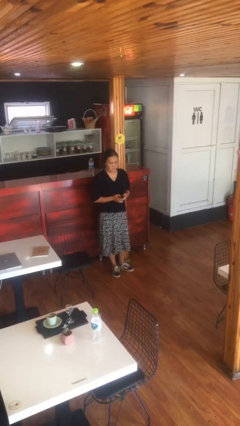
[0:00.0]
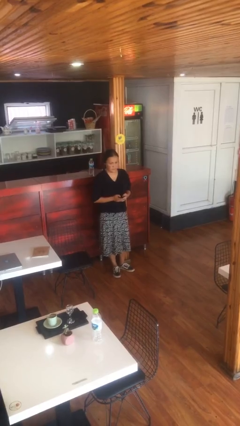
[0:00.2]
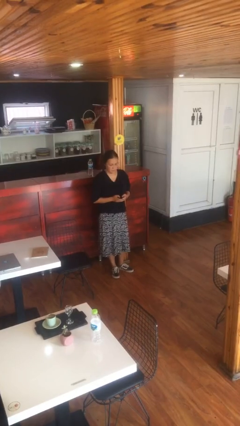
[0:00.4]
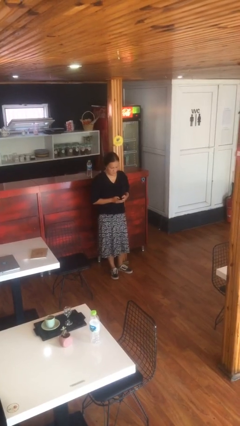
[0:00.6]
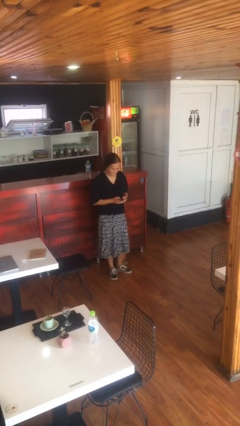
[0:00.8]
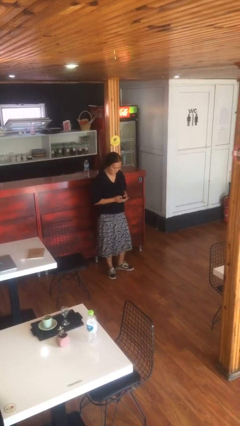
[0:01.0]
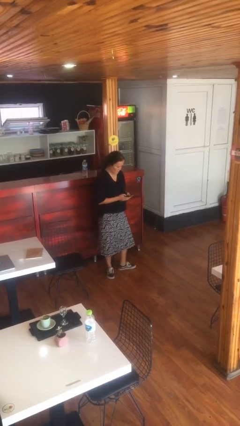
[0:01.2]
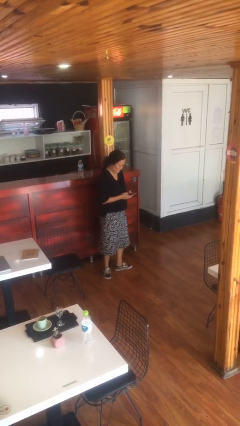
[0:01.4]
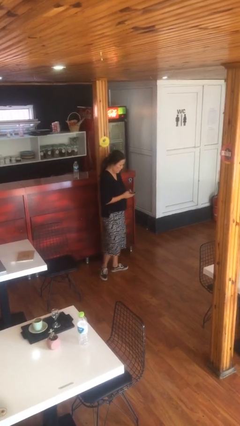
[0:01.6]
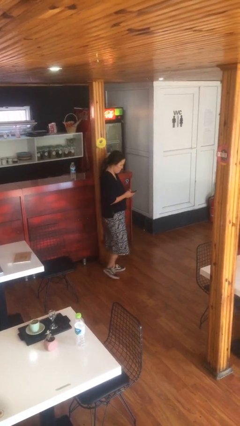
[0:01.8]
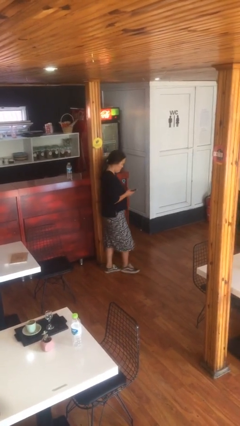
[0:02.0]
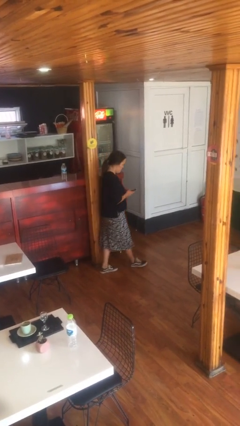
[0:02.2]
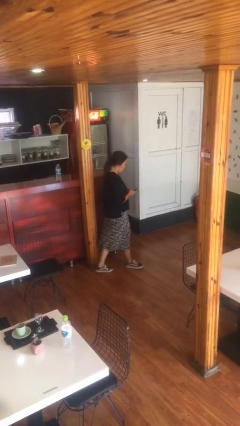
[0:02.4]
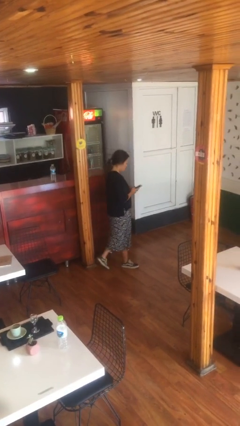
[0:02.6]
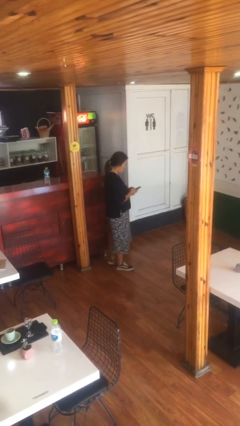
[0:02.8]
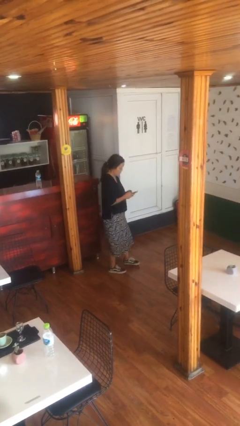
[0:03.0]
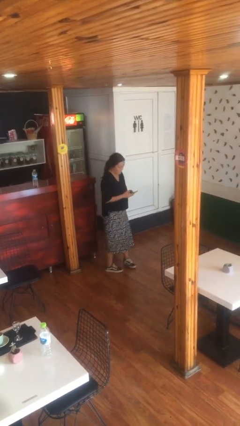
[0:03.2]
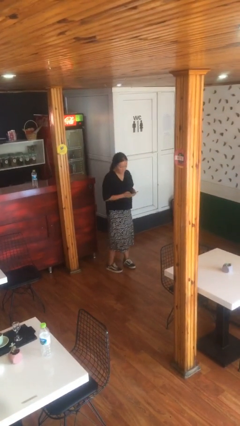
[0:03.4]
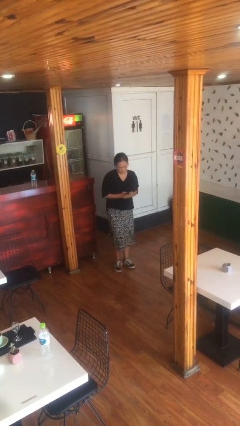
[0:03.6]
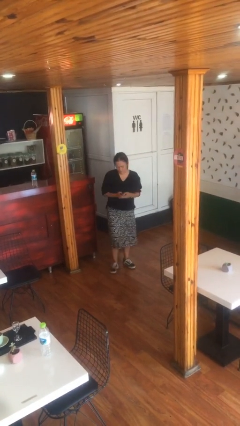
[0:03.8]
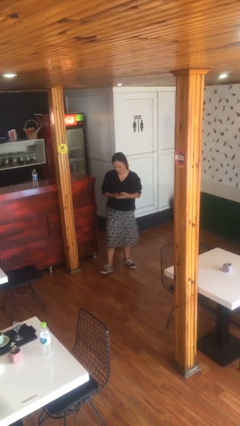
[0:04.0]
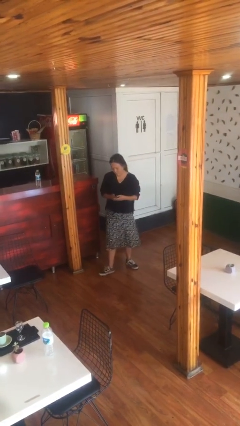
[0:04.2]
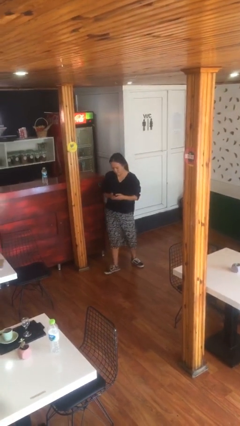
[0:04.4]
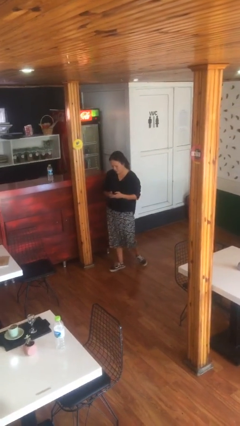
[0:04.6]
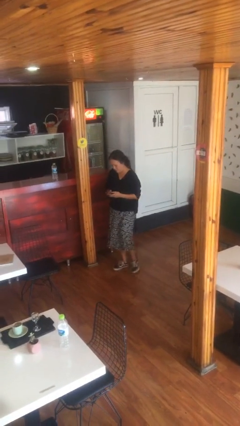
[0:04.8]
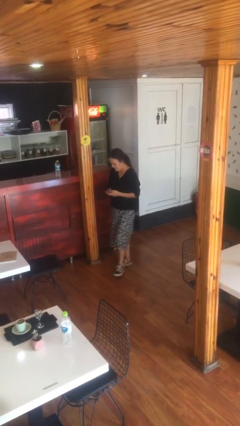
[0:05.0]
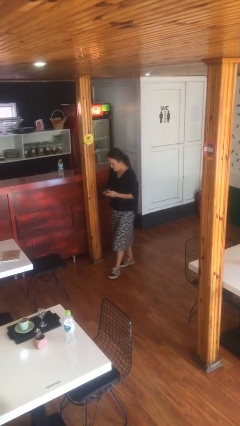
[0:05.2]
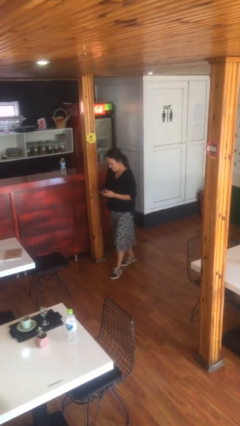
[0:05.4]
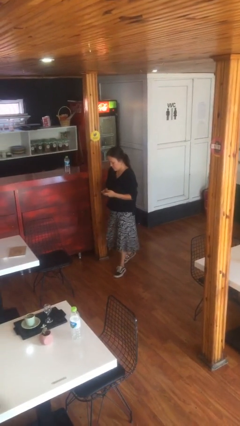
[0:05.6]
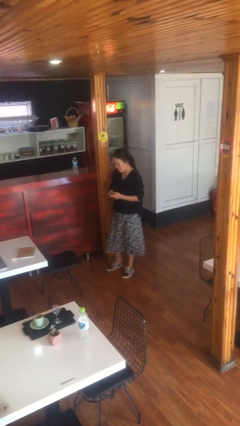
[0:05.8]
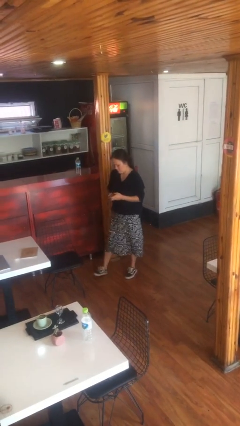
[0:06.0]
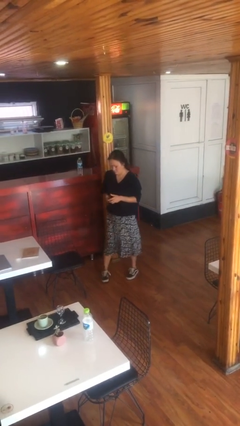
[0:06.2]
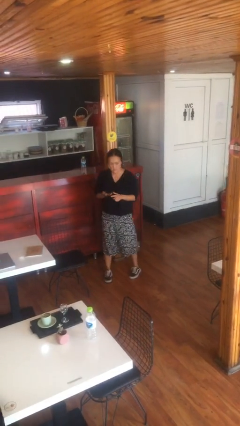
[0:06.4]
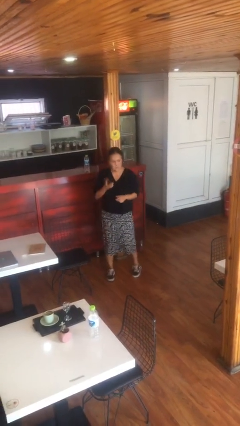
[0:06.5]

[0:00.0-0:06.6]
person texts on phone

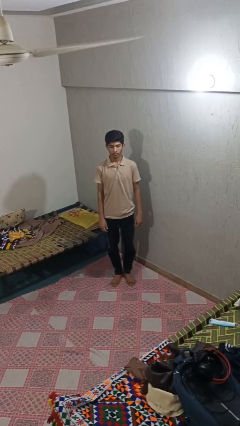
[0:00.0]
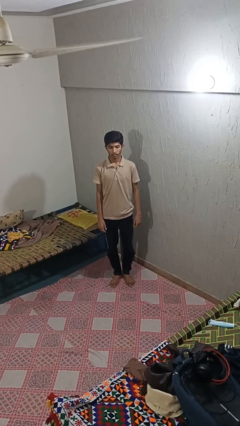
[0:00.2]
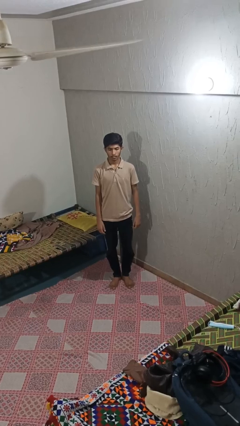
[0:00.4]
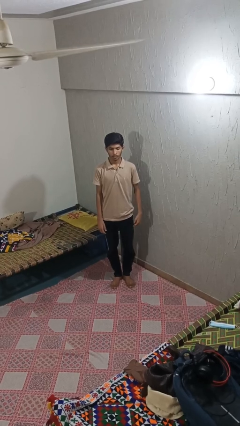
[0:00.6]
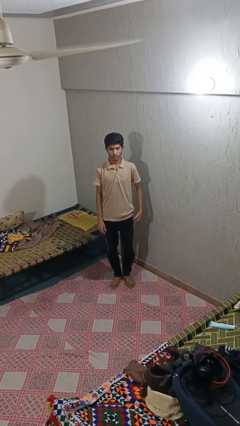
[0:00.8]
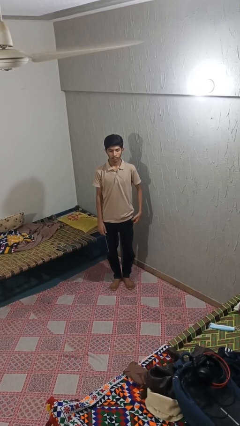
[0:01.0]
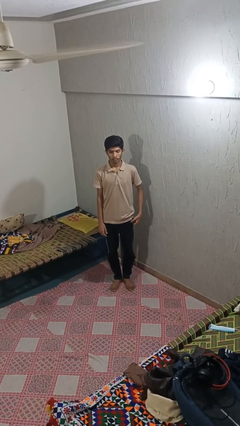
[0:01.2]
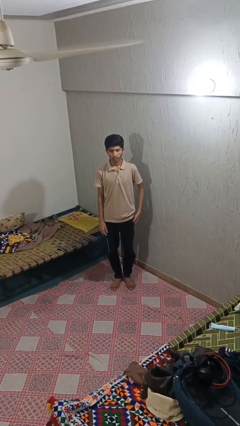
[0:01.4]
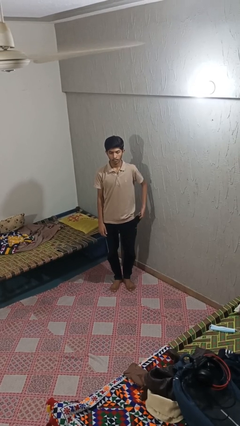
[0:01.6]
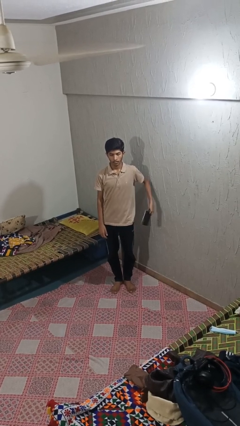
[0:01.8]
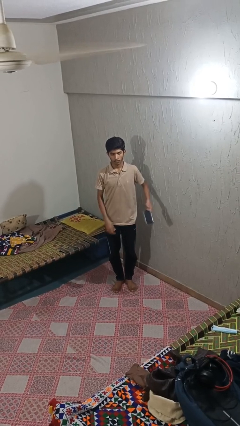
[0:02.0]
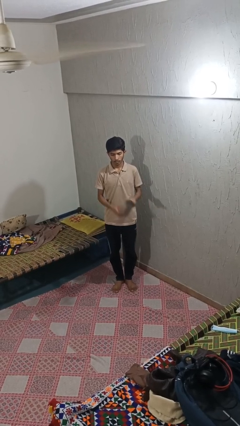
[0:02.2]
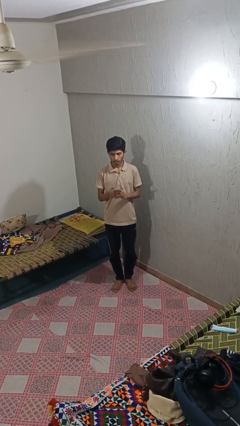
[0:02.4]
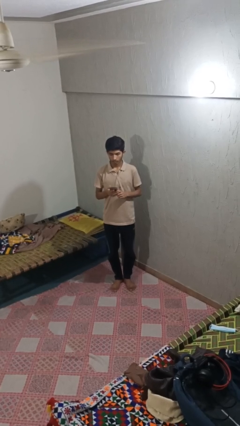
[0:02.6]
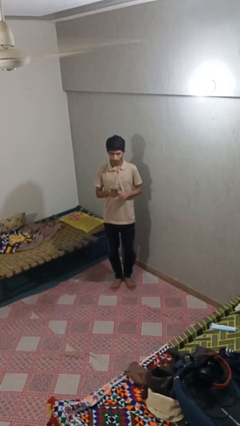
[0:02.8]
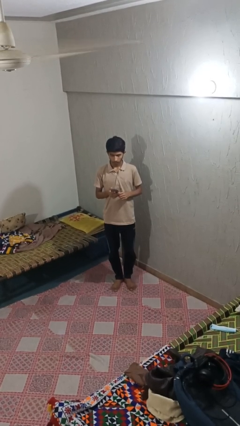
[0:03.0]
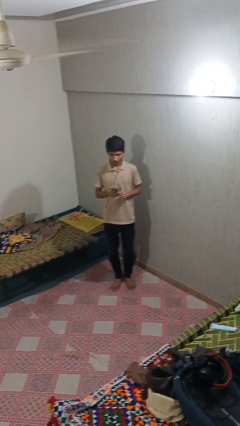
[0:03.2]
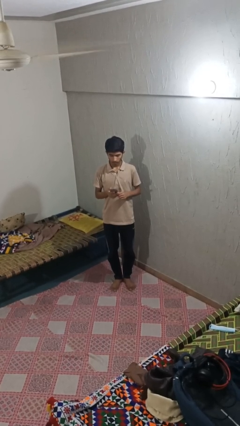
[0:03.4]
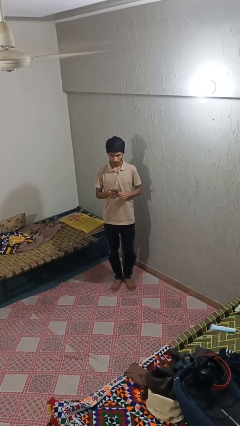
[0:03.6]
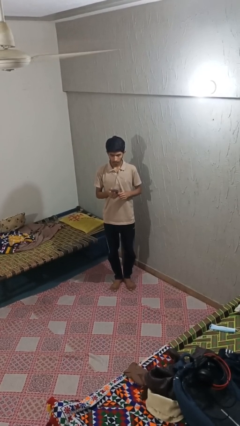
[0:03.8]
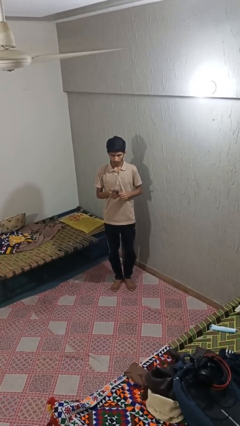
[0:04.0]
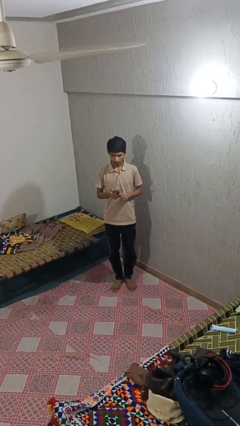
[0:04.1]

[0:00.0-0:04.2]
person takes phone from pocket

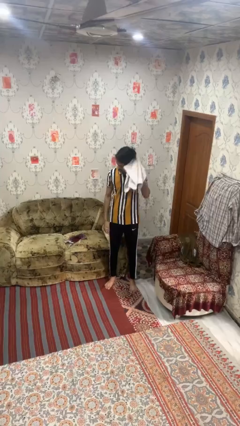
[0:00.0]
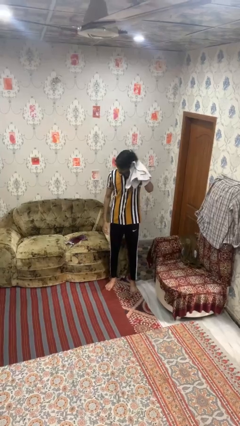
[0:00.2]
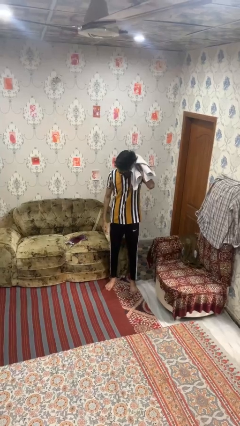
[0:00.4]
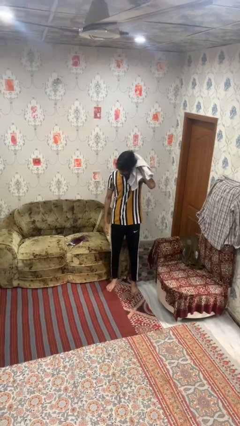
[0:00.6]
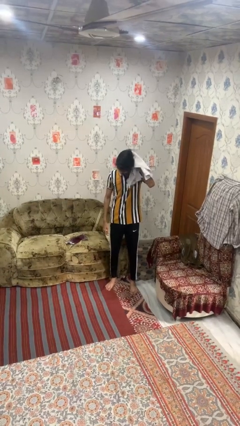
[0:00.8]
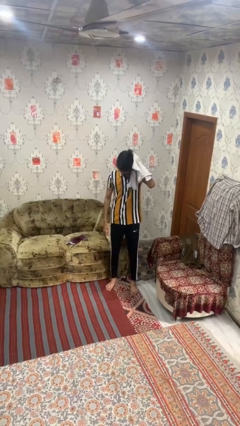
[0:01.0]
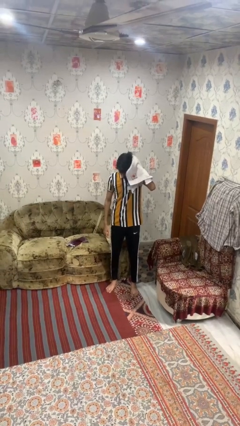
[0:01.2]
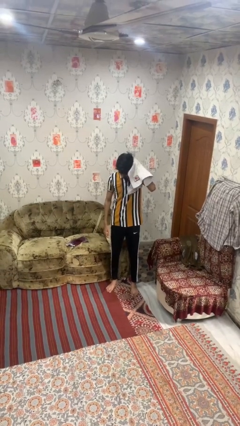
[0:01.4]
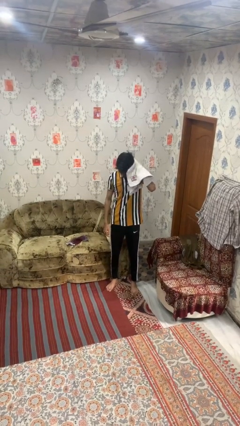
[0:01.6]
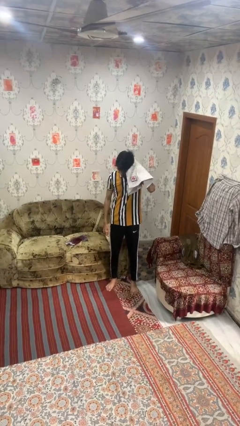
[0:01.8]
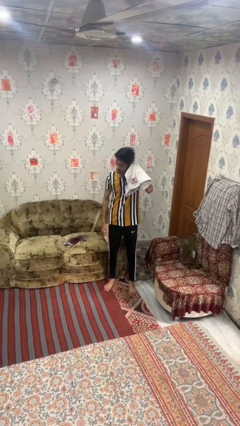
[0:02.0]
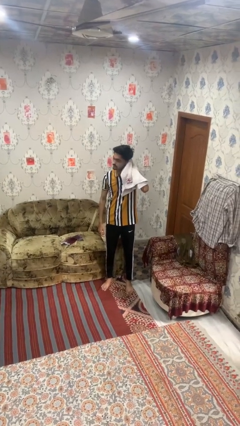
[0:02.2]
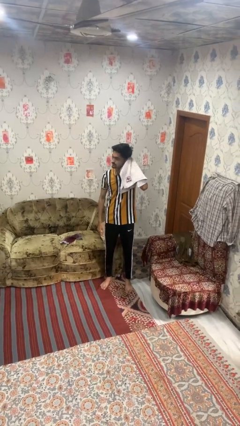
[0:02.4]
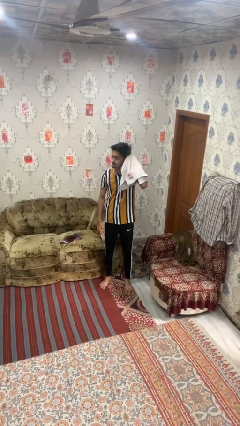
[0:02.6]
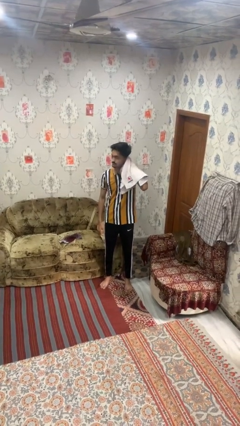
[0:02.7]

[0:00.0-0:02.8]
person dries hair with towel

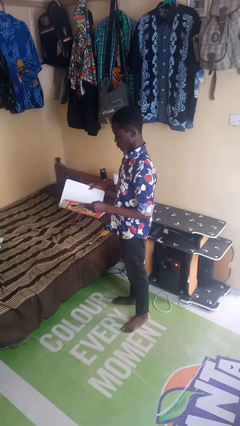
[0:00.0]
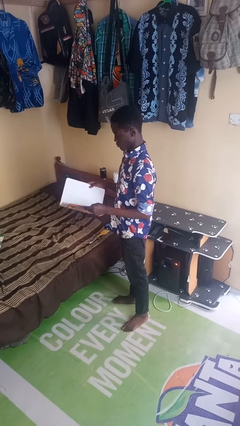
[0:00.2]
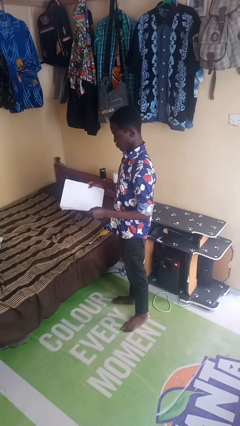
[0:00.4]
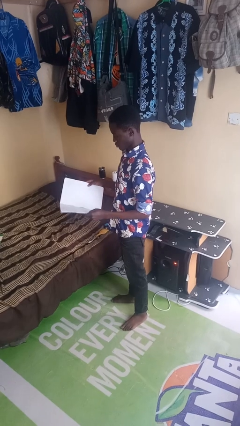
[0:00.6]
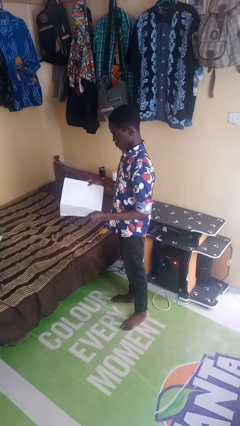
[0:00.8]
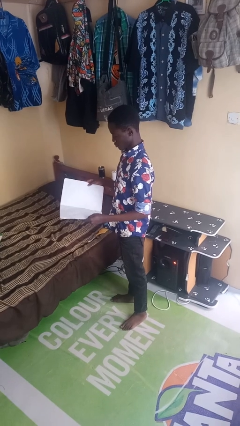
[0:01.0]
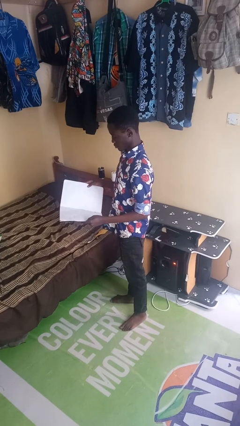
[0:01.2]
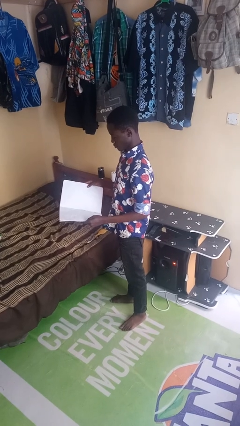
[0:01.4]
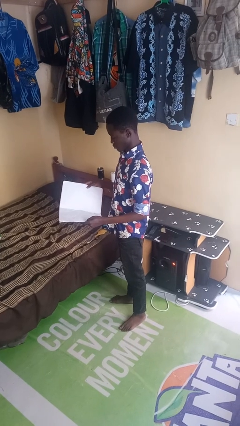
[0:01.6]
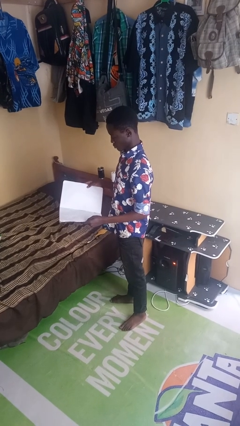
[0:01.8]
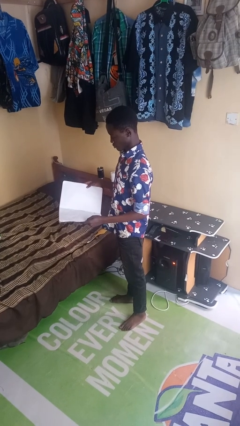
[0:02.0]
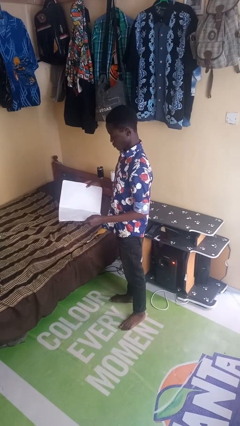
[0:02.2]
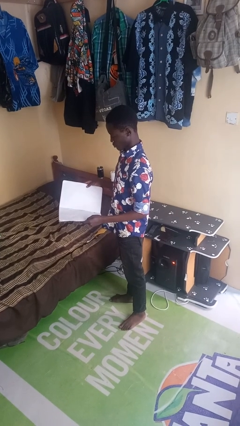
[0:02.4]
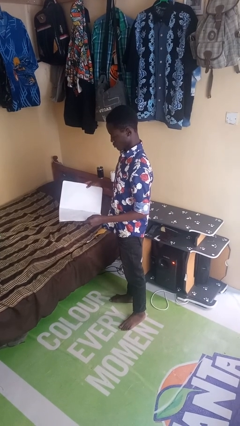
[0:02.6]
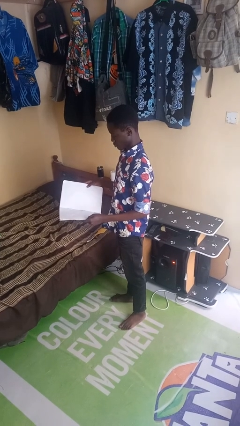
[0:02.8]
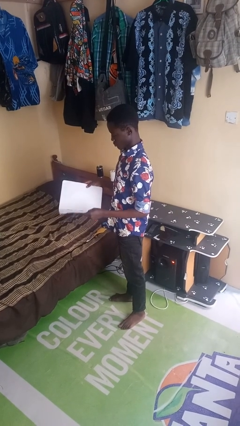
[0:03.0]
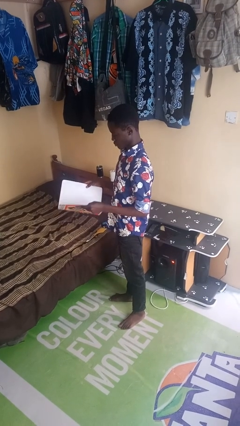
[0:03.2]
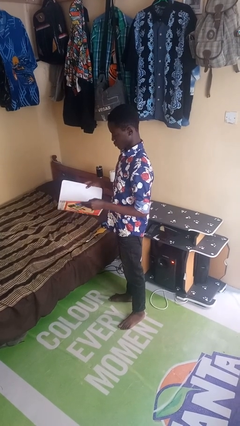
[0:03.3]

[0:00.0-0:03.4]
person reads newspaper

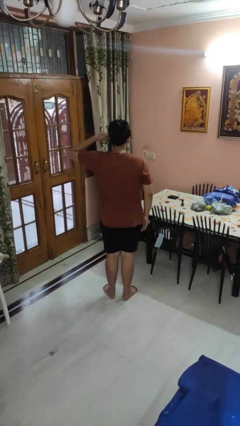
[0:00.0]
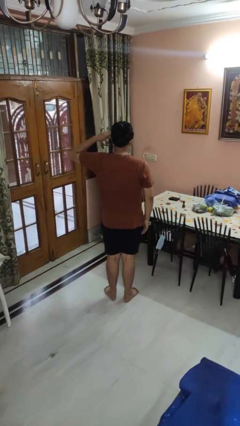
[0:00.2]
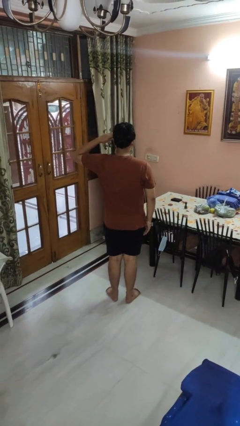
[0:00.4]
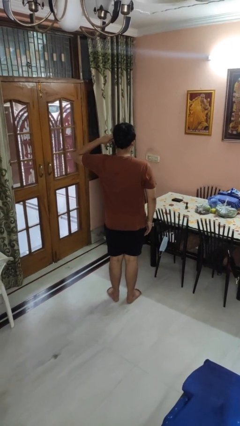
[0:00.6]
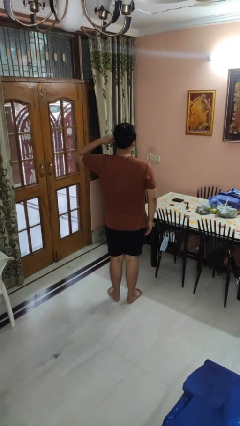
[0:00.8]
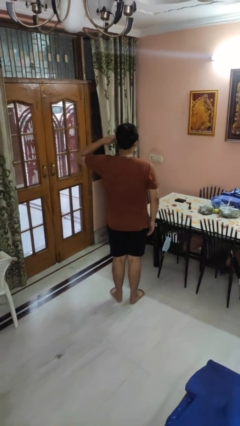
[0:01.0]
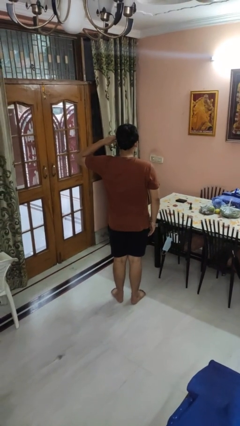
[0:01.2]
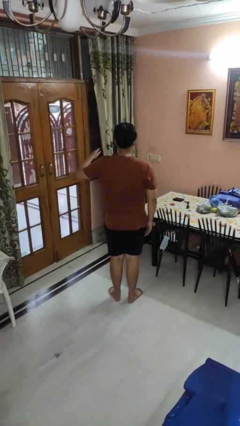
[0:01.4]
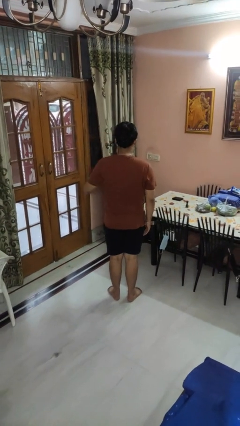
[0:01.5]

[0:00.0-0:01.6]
person salutes
